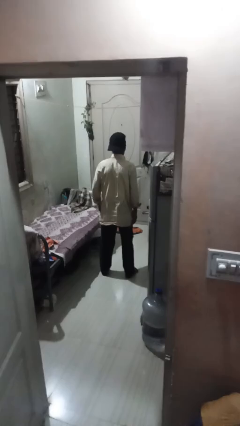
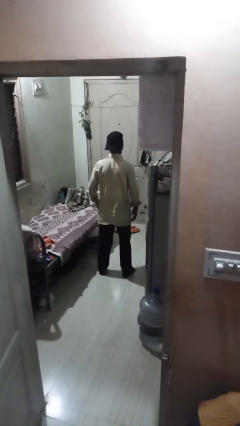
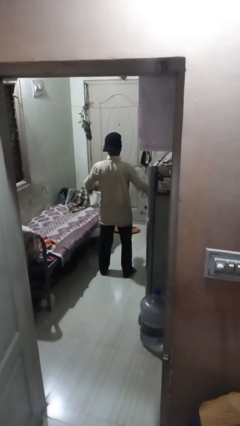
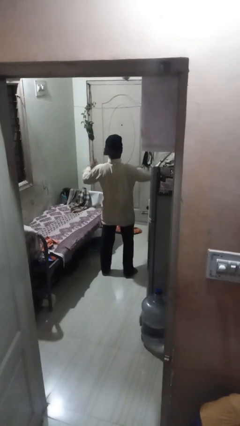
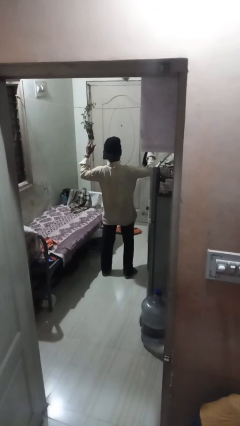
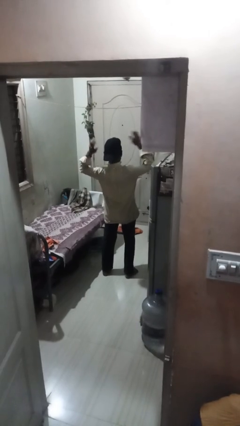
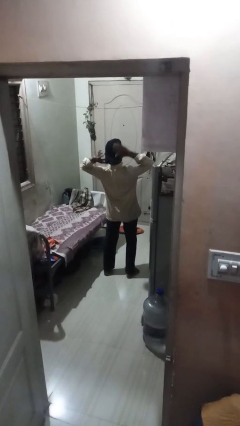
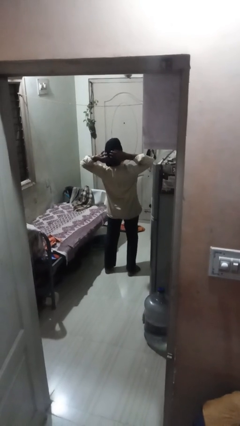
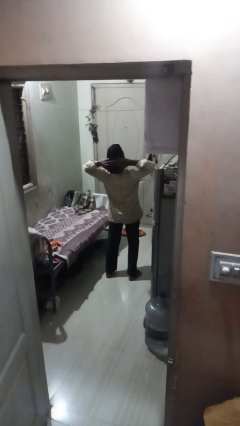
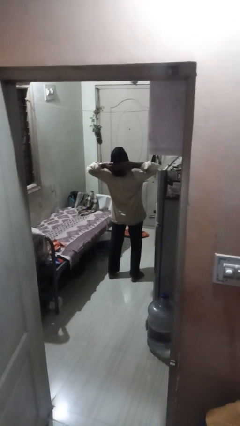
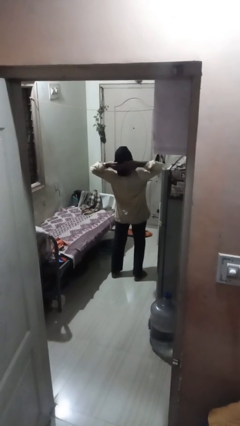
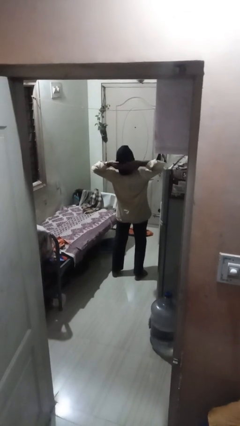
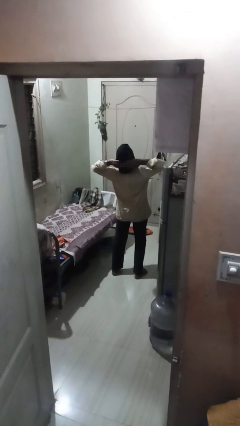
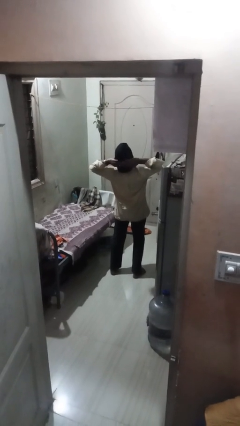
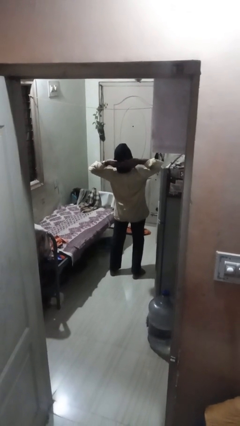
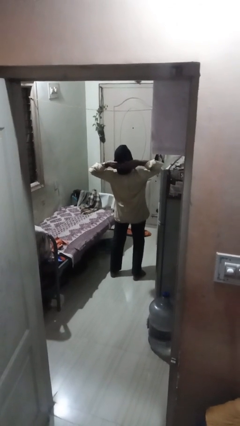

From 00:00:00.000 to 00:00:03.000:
person stretches arms over head

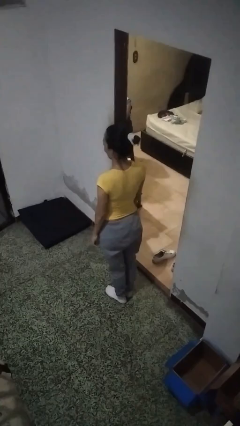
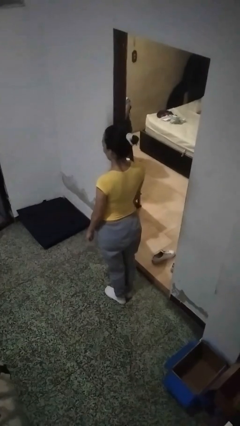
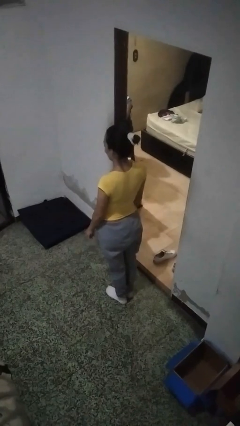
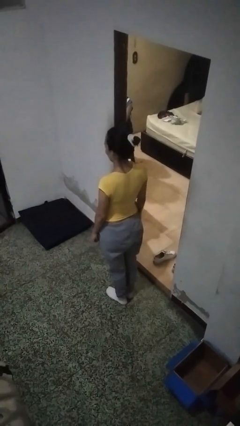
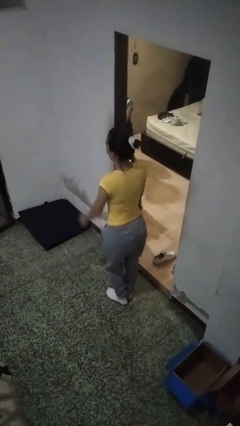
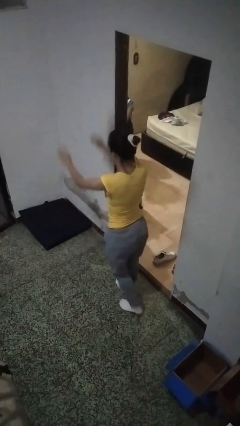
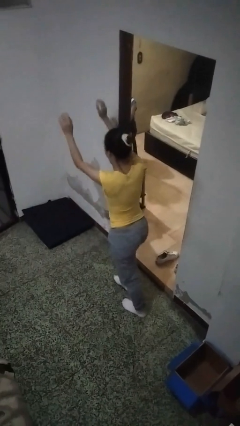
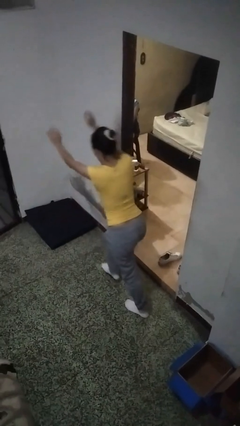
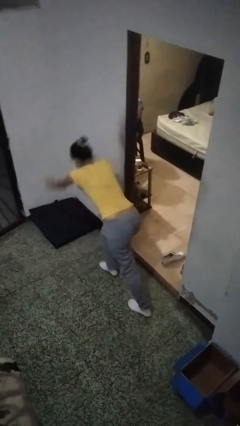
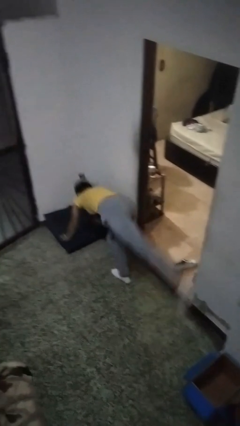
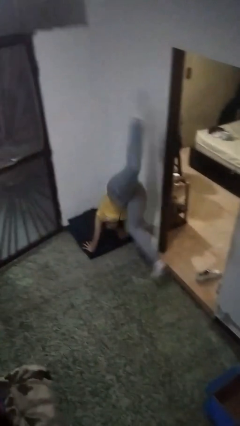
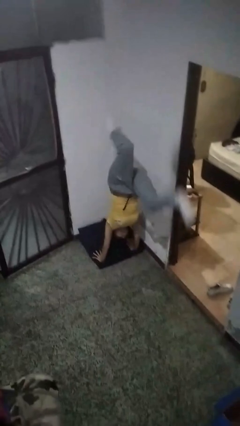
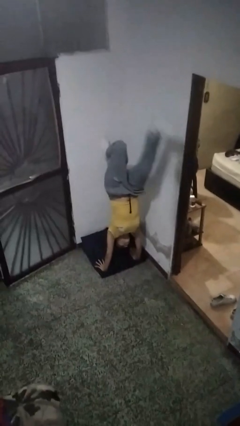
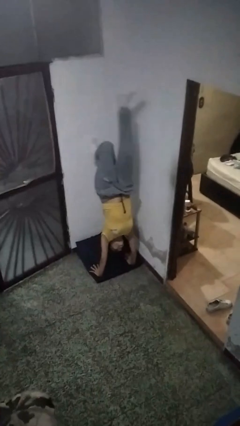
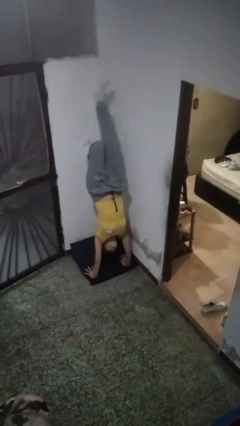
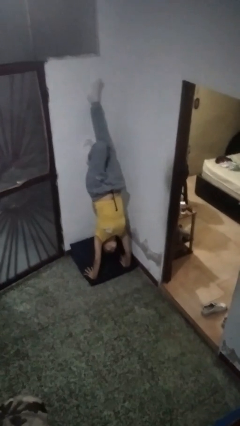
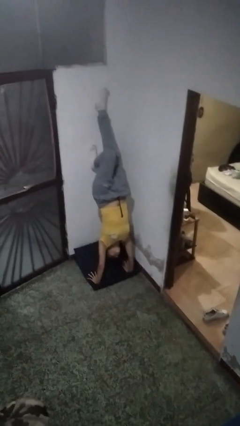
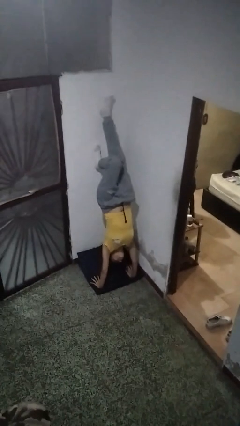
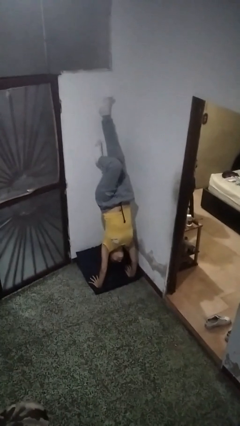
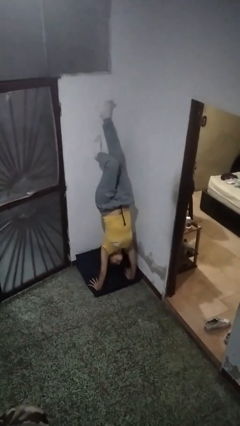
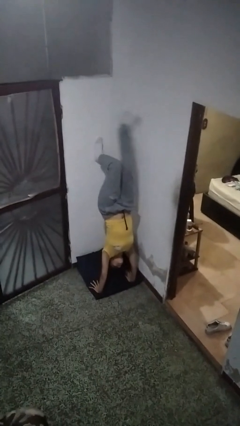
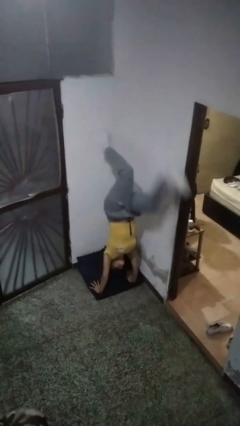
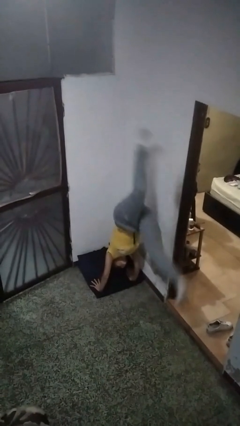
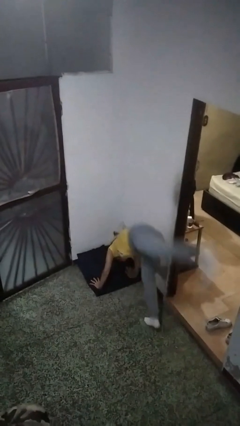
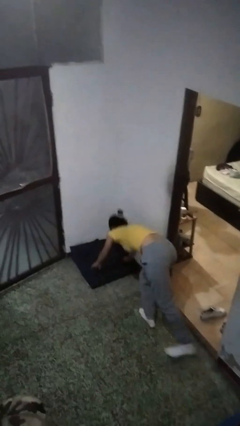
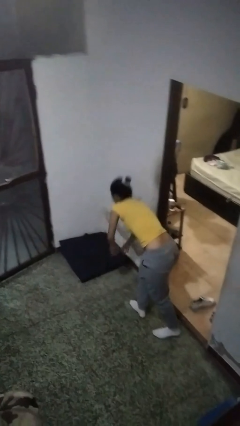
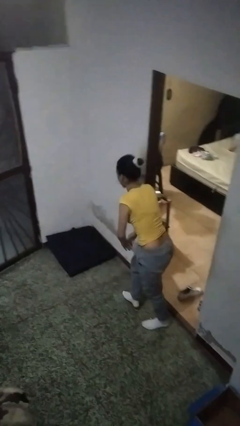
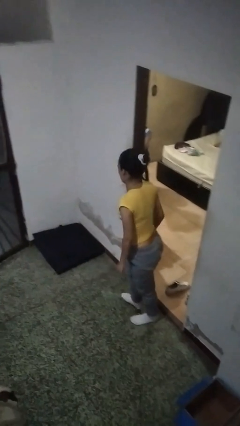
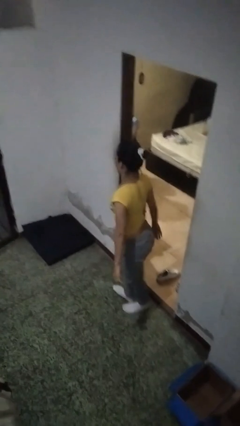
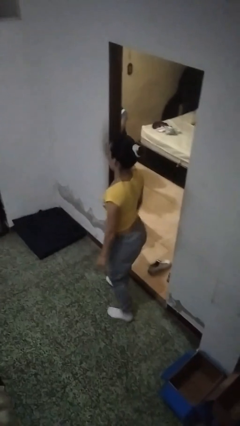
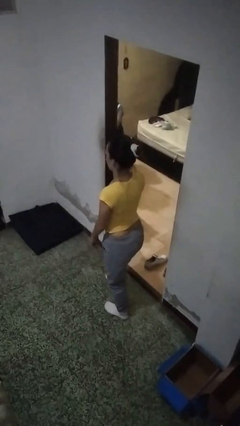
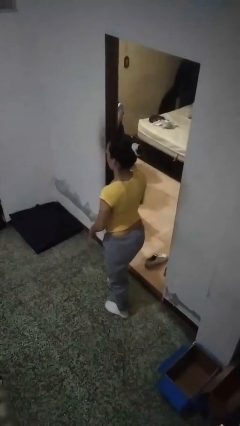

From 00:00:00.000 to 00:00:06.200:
person handstand

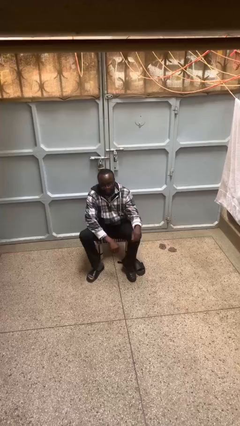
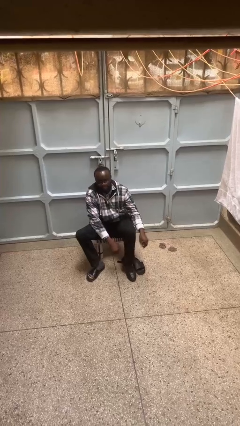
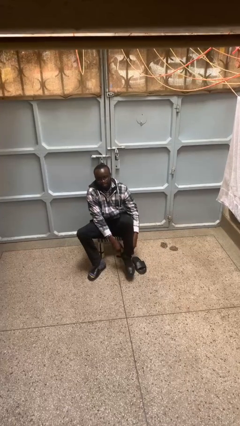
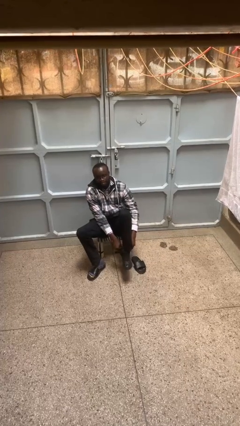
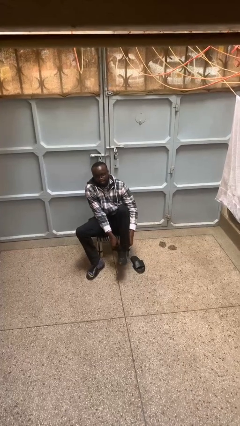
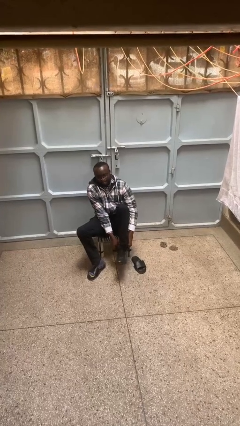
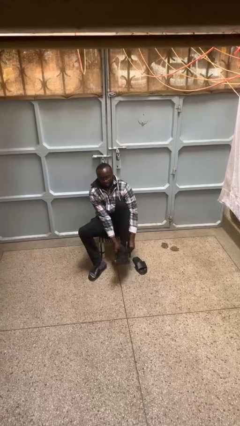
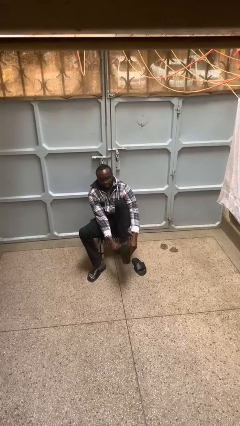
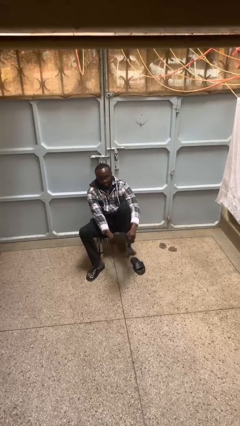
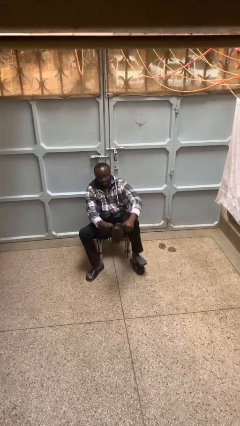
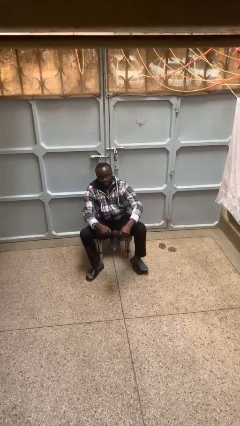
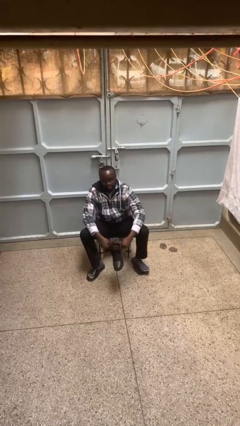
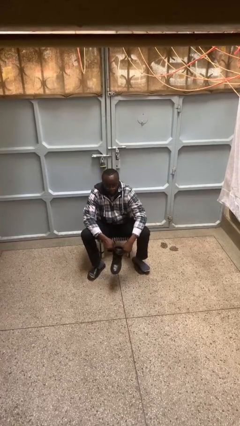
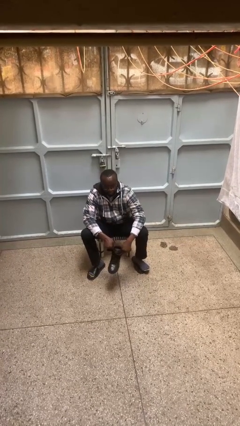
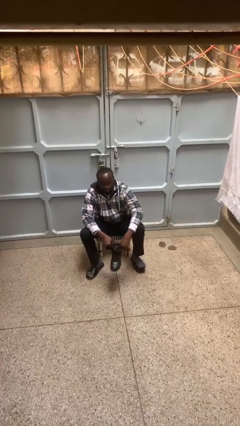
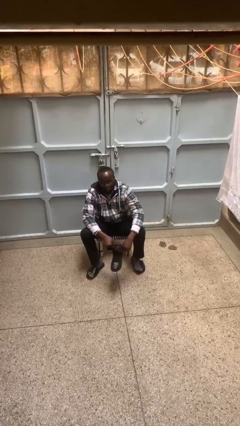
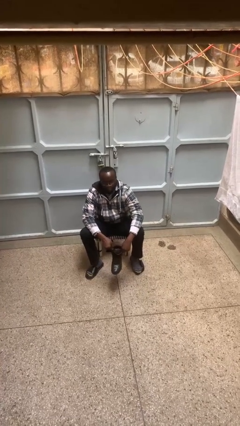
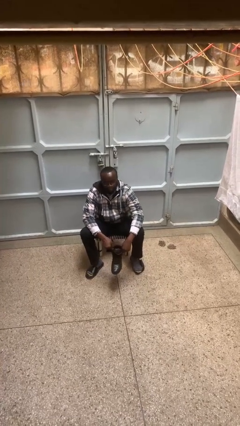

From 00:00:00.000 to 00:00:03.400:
person takes off boots

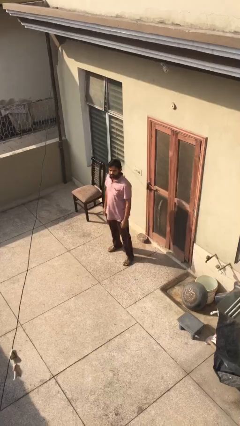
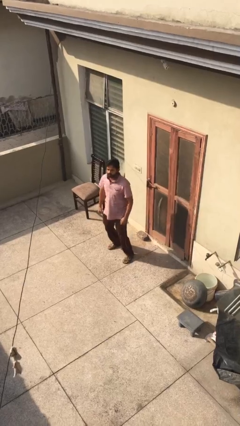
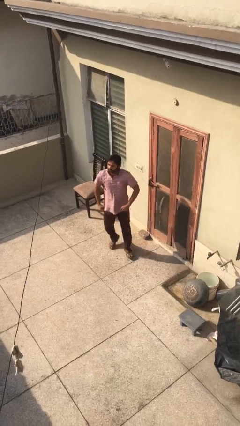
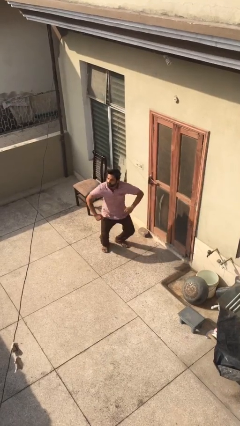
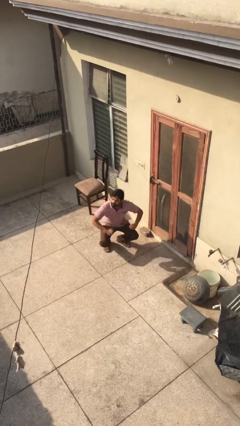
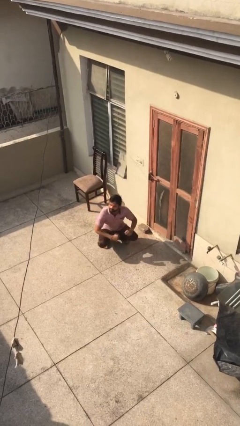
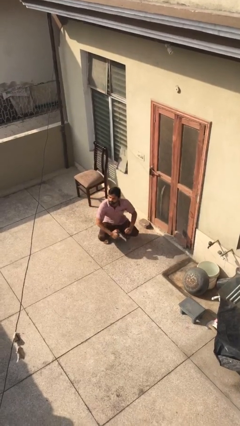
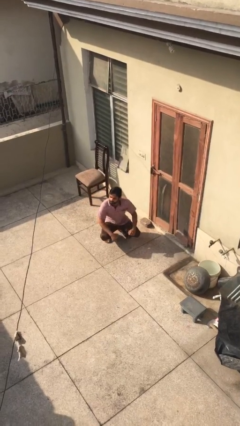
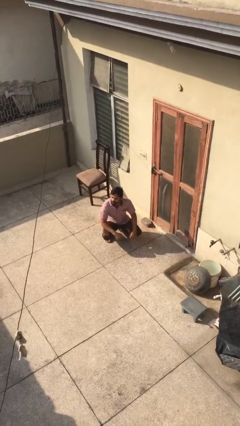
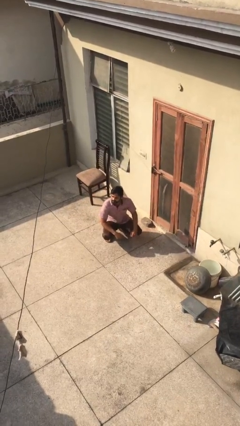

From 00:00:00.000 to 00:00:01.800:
person sits down

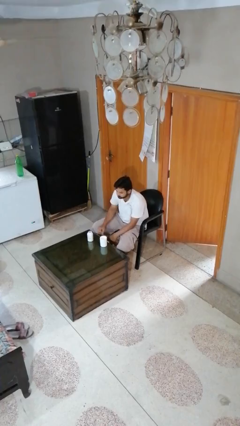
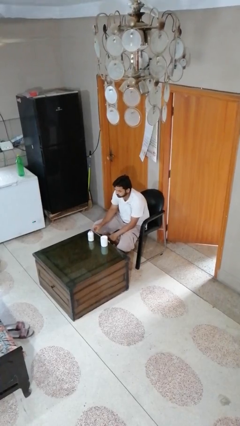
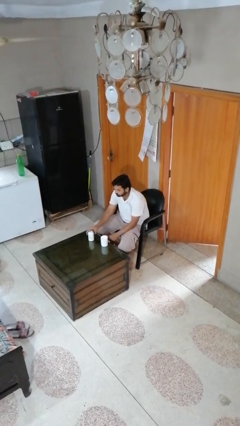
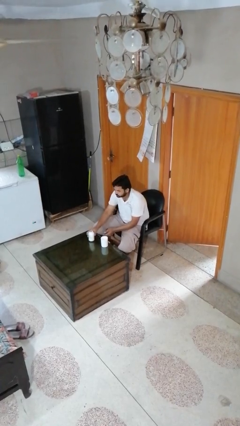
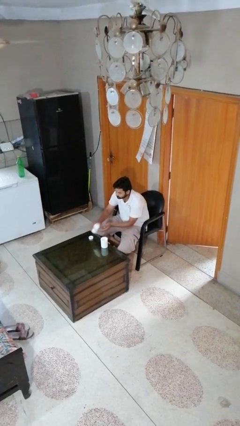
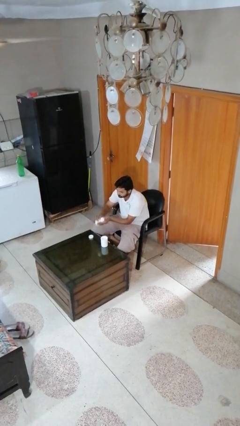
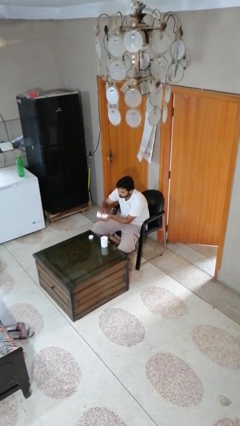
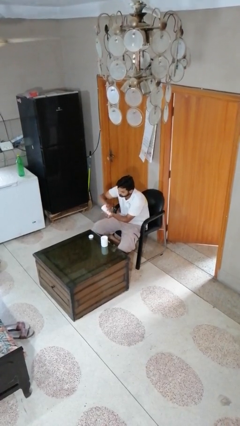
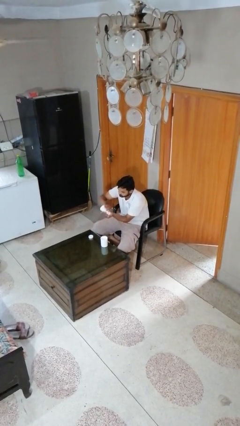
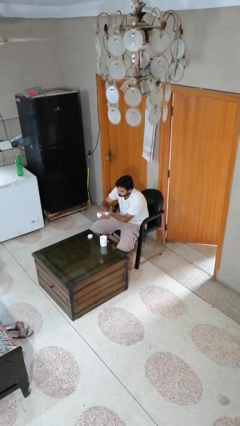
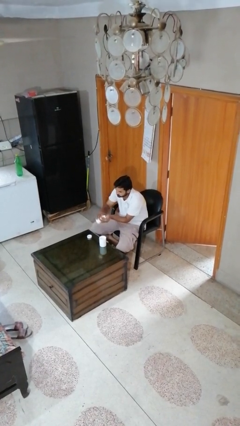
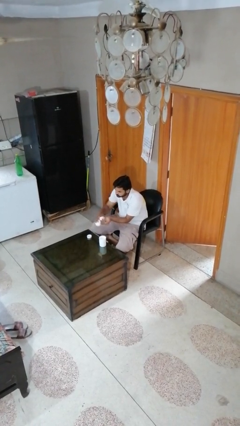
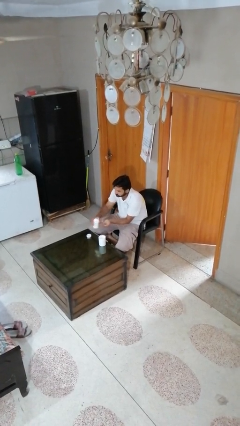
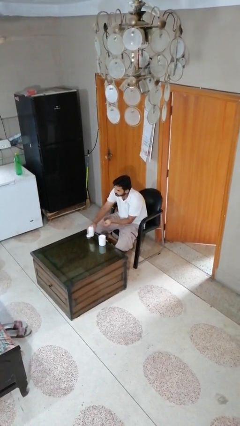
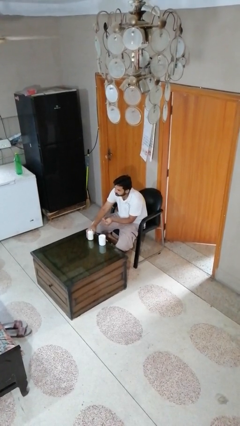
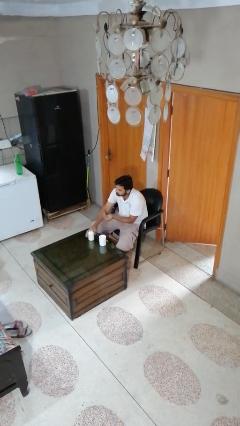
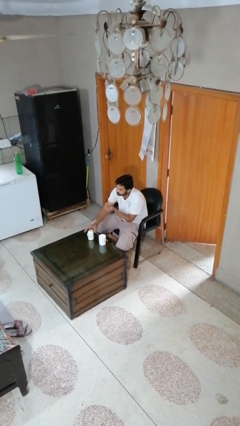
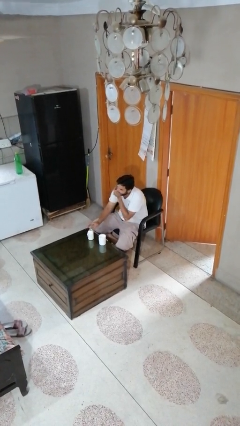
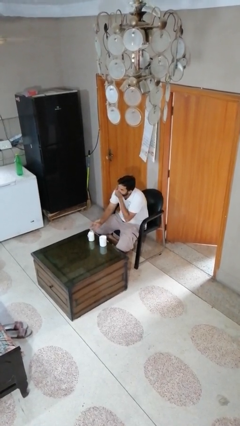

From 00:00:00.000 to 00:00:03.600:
person takes medicine pills
